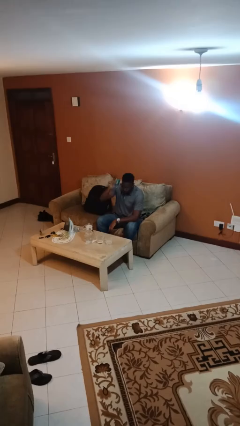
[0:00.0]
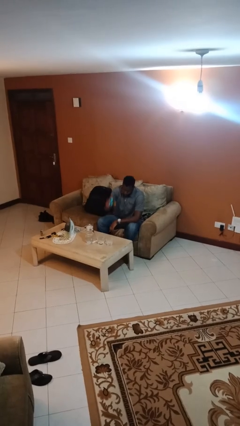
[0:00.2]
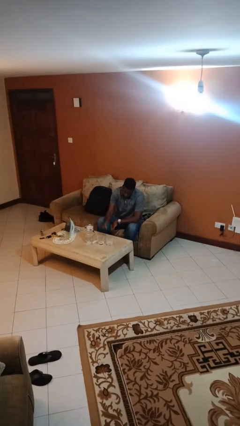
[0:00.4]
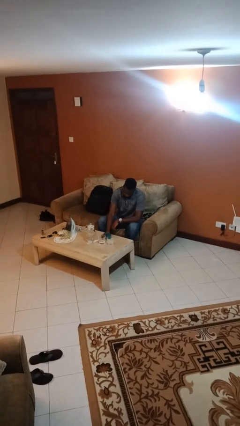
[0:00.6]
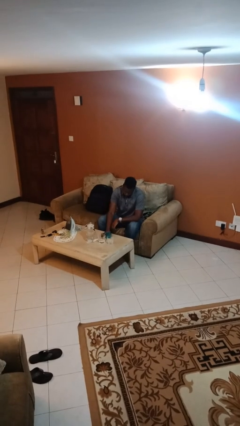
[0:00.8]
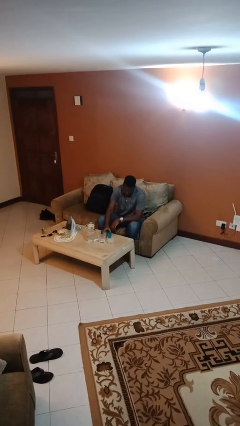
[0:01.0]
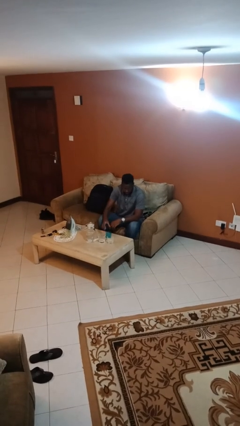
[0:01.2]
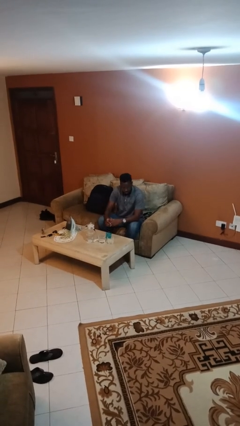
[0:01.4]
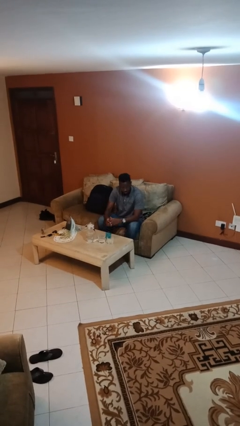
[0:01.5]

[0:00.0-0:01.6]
person puts down object on table

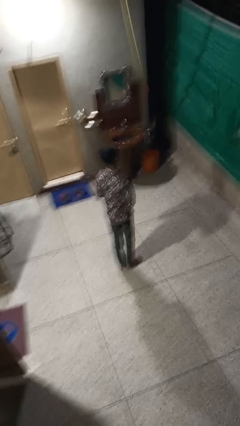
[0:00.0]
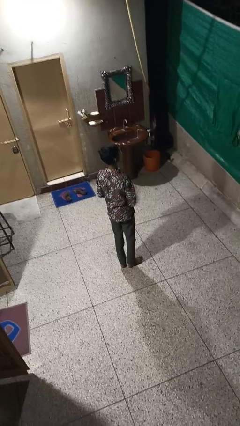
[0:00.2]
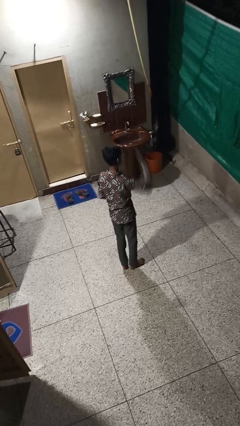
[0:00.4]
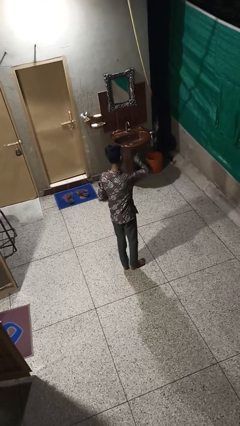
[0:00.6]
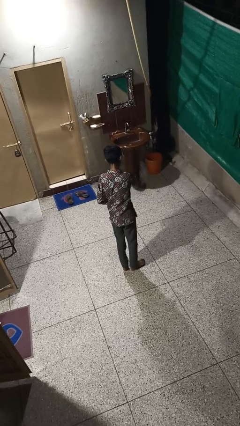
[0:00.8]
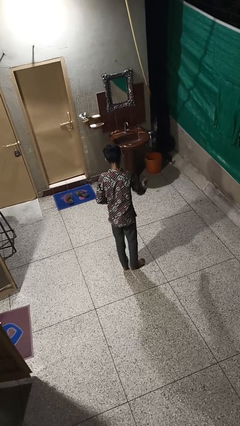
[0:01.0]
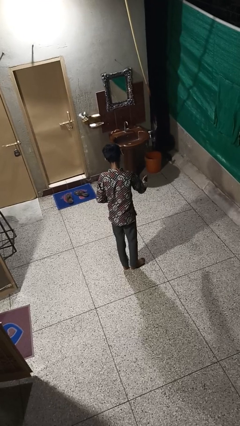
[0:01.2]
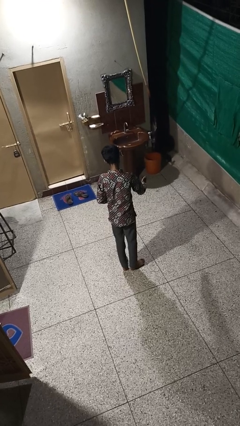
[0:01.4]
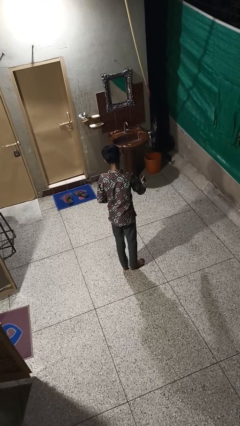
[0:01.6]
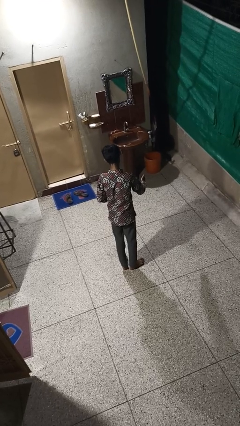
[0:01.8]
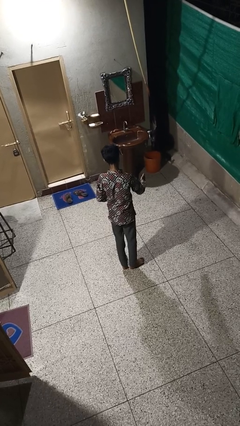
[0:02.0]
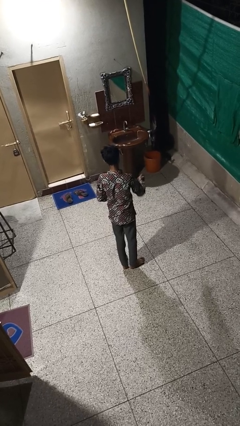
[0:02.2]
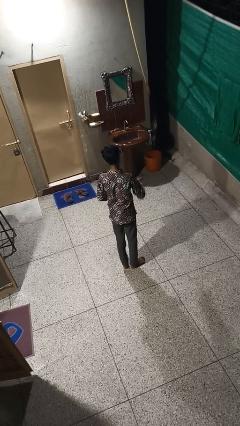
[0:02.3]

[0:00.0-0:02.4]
person karate chop

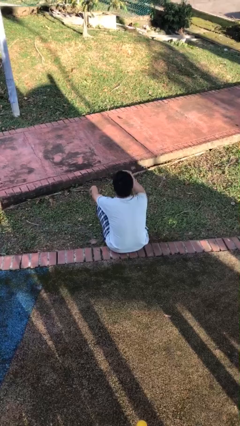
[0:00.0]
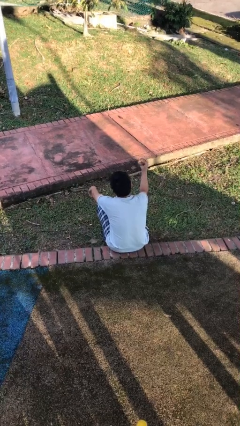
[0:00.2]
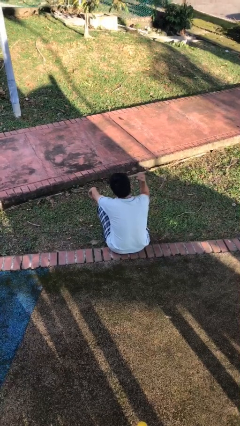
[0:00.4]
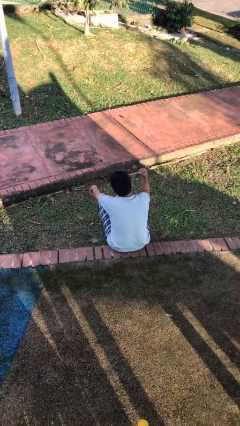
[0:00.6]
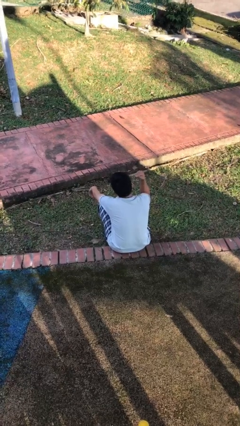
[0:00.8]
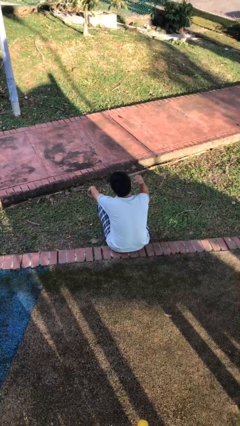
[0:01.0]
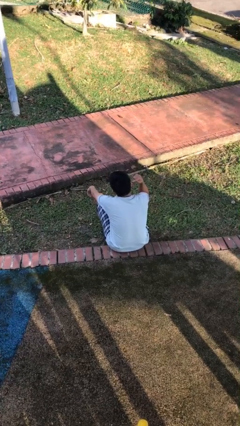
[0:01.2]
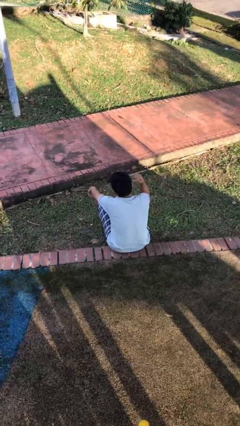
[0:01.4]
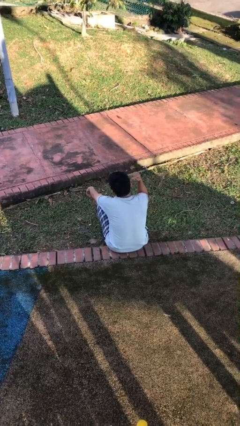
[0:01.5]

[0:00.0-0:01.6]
person gestures listen closely

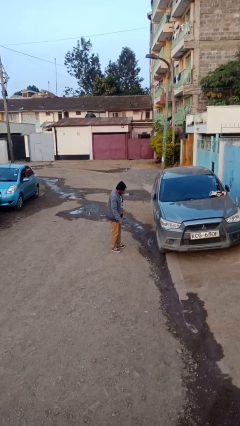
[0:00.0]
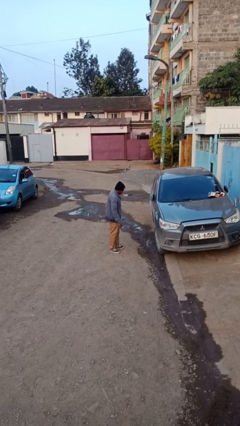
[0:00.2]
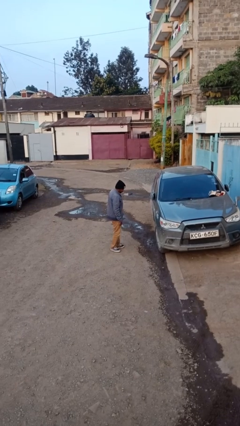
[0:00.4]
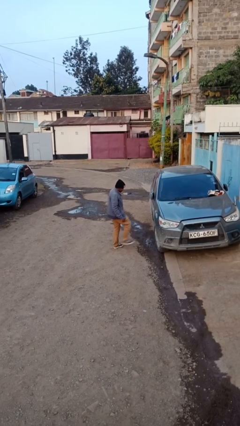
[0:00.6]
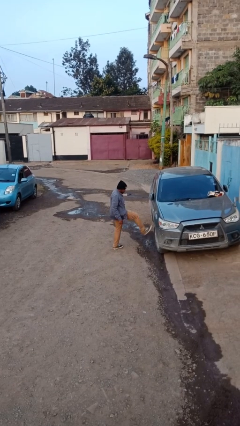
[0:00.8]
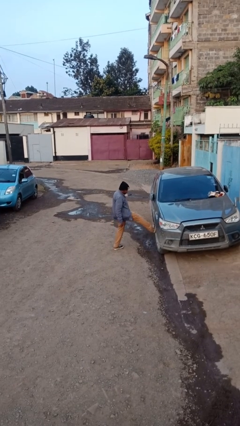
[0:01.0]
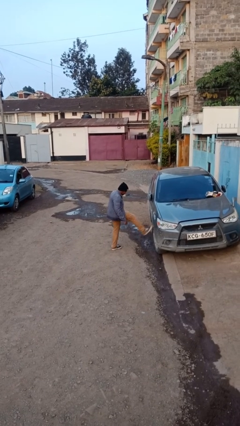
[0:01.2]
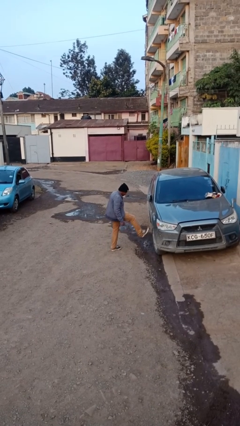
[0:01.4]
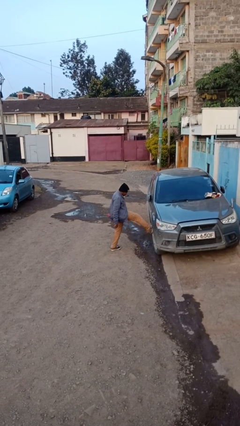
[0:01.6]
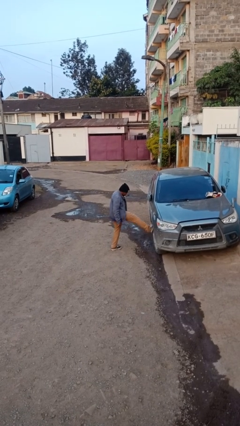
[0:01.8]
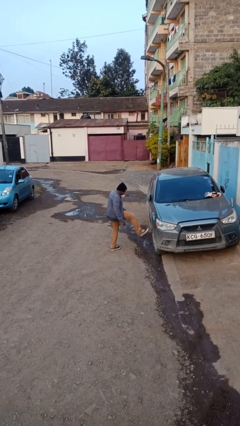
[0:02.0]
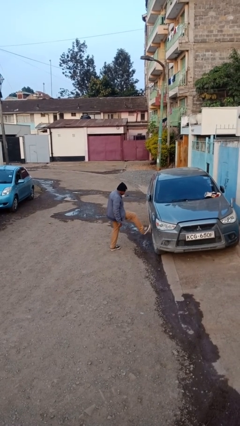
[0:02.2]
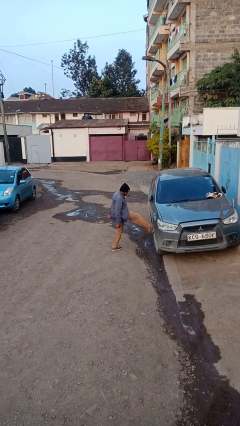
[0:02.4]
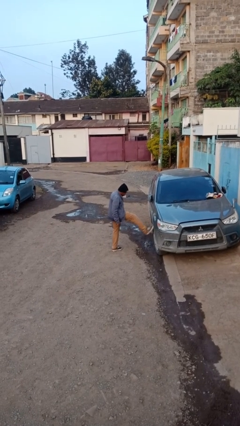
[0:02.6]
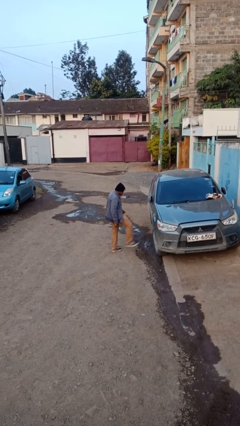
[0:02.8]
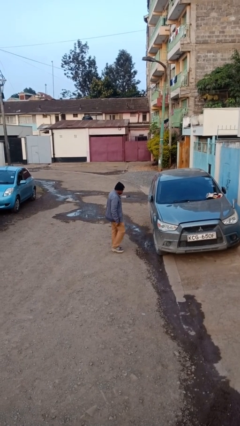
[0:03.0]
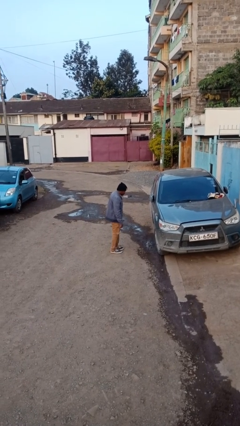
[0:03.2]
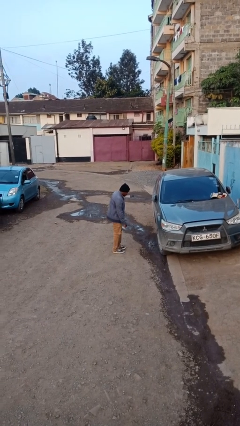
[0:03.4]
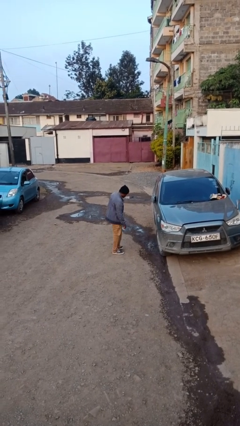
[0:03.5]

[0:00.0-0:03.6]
person kicks car tires

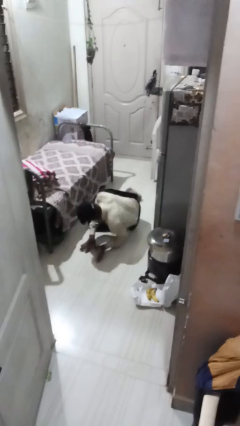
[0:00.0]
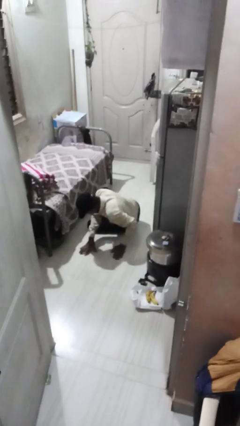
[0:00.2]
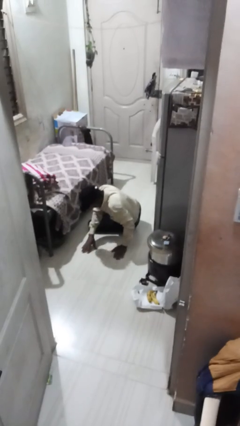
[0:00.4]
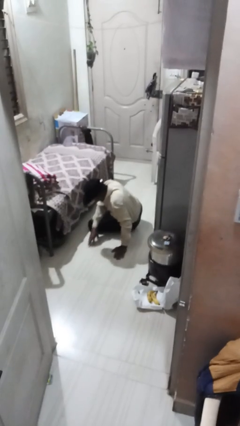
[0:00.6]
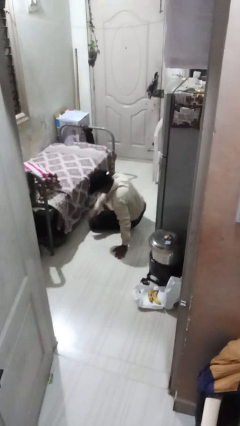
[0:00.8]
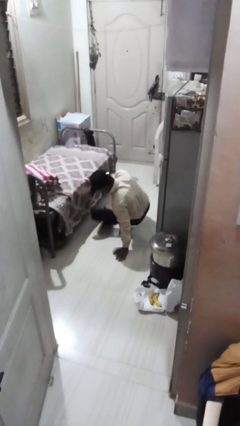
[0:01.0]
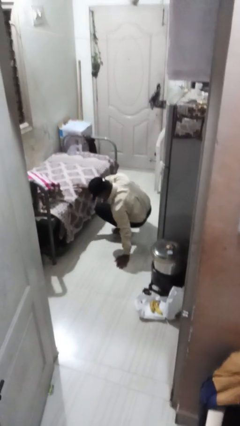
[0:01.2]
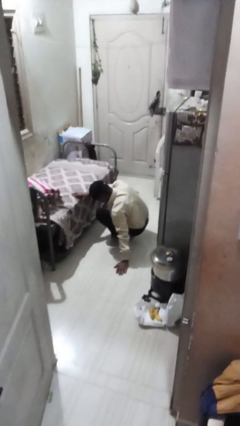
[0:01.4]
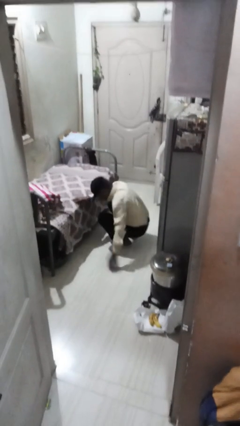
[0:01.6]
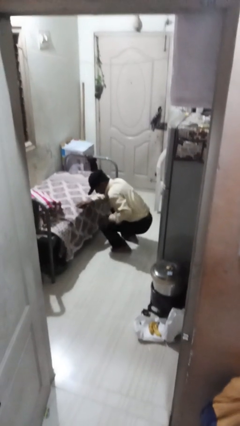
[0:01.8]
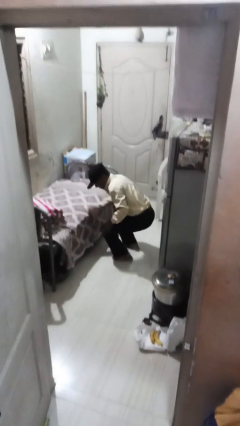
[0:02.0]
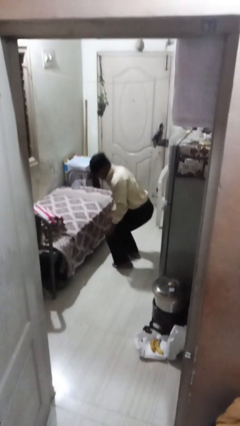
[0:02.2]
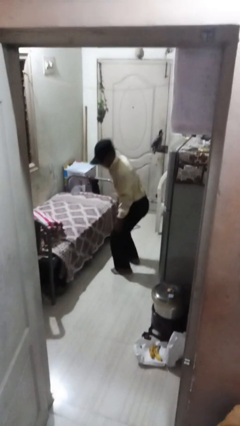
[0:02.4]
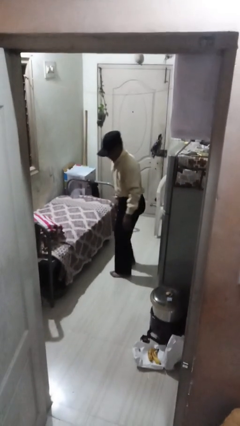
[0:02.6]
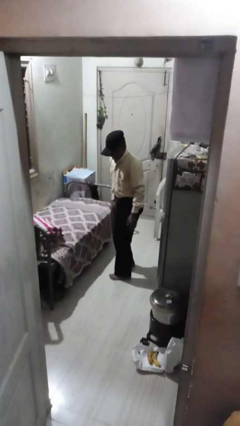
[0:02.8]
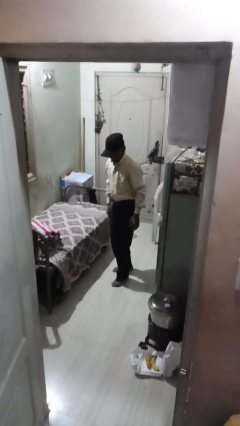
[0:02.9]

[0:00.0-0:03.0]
person stands up from floor

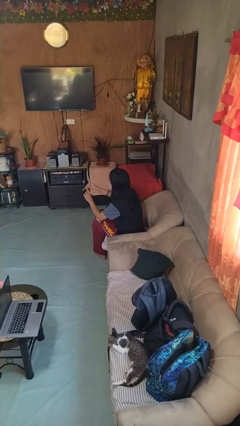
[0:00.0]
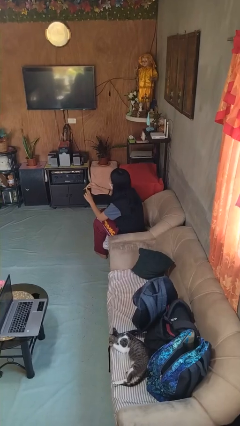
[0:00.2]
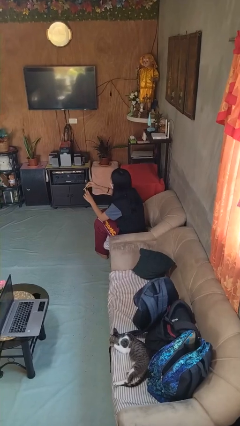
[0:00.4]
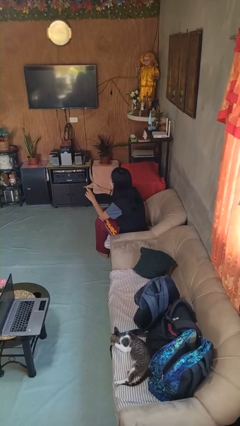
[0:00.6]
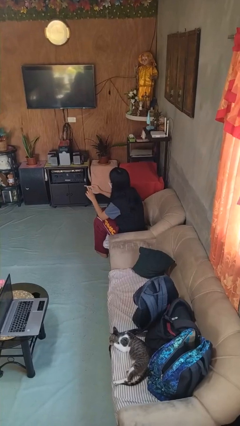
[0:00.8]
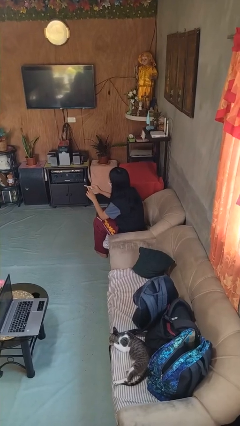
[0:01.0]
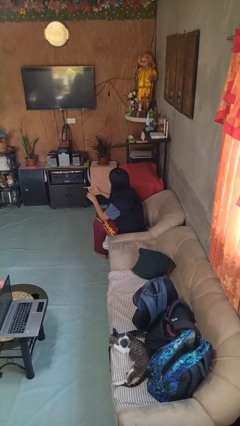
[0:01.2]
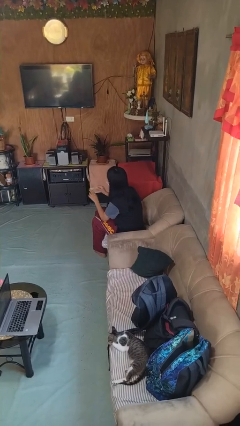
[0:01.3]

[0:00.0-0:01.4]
person files fingernails

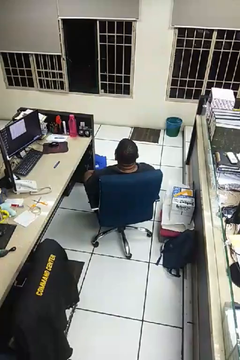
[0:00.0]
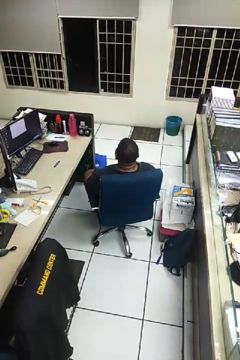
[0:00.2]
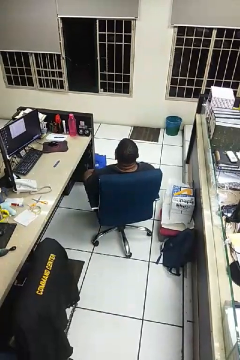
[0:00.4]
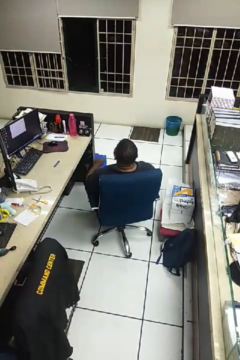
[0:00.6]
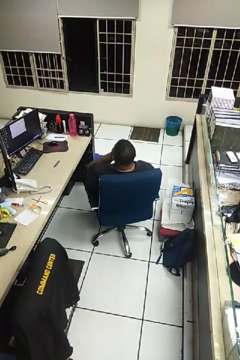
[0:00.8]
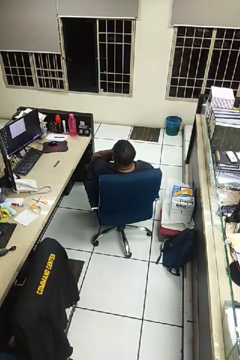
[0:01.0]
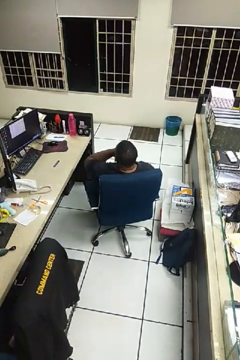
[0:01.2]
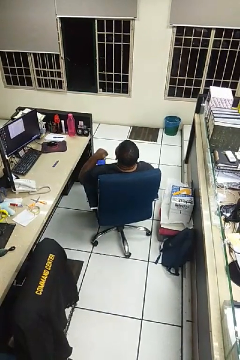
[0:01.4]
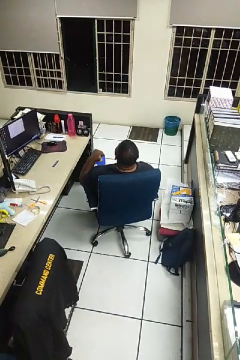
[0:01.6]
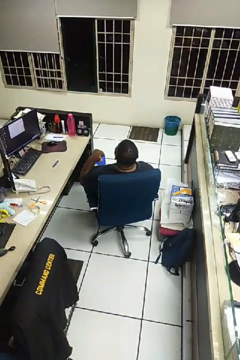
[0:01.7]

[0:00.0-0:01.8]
person gestures cut

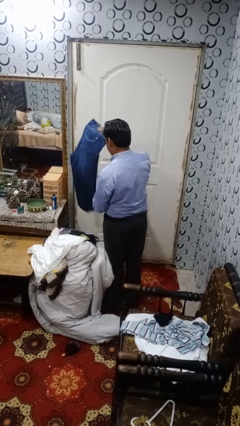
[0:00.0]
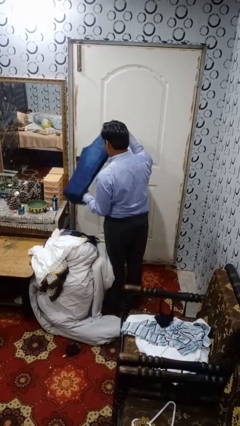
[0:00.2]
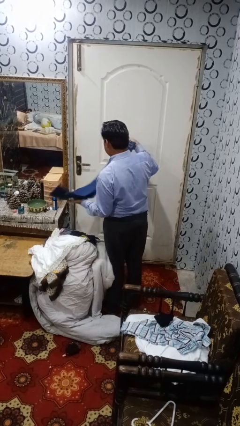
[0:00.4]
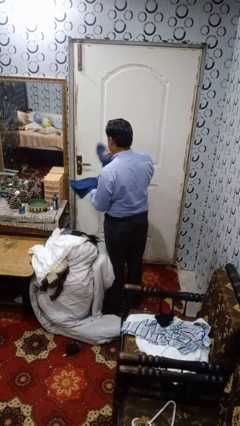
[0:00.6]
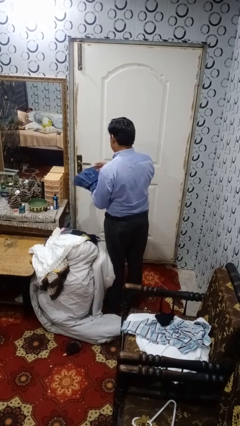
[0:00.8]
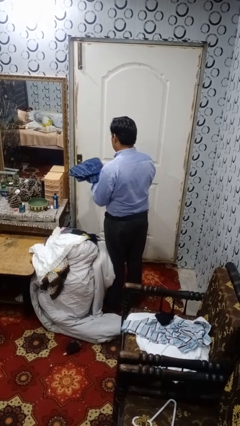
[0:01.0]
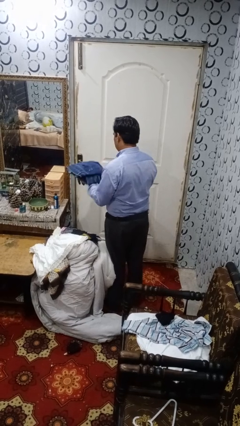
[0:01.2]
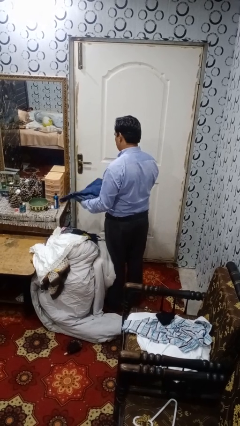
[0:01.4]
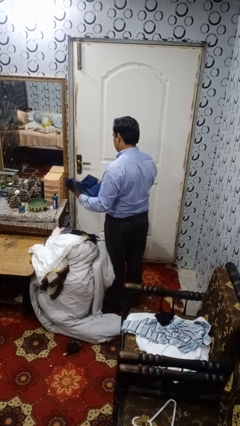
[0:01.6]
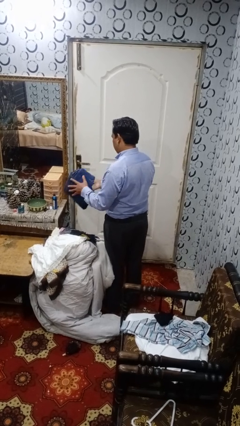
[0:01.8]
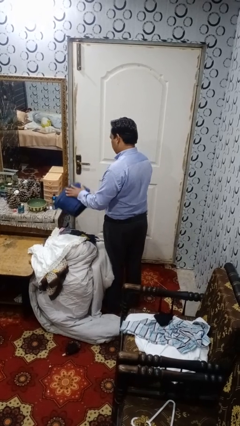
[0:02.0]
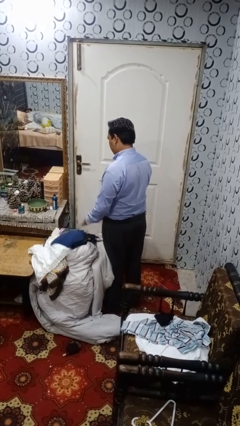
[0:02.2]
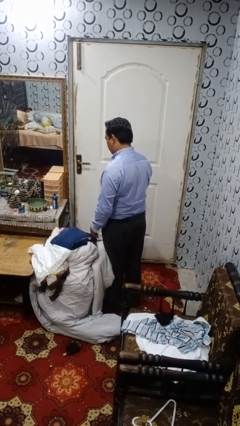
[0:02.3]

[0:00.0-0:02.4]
person folds pants
